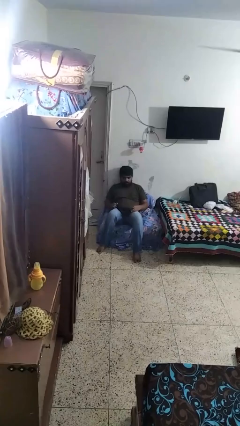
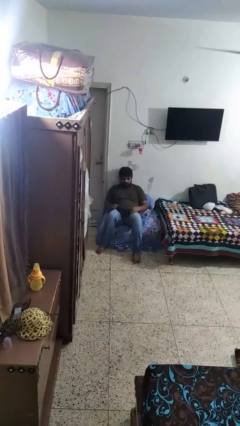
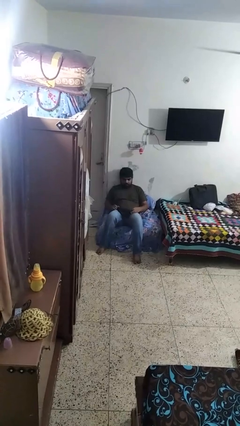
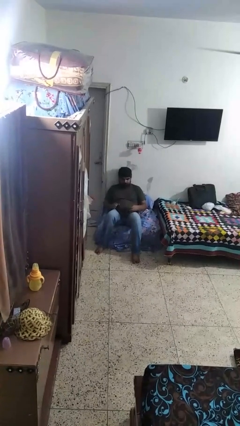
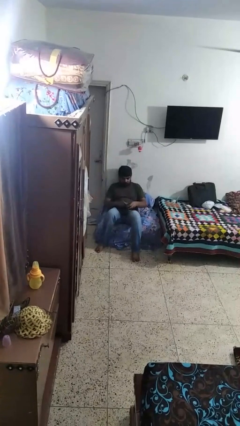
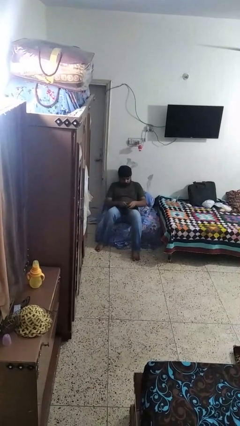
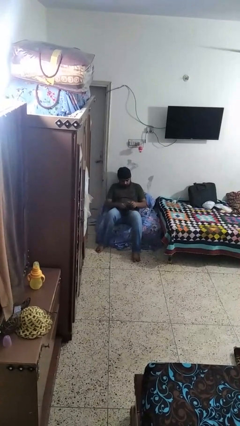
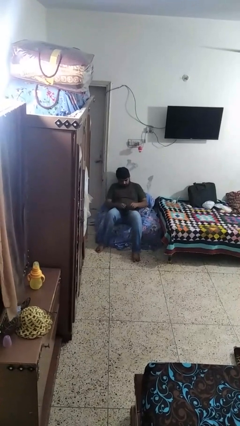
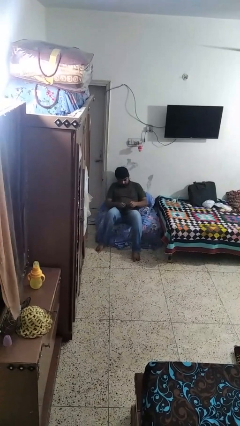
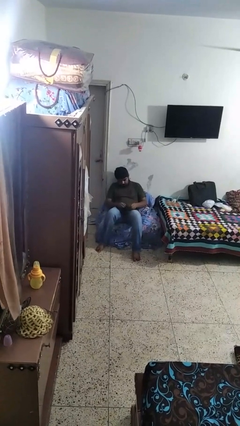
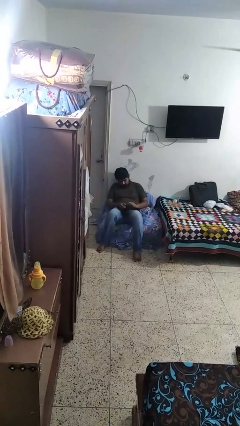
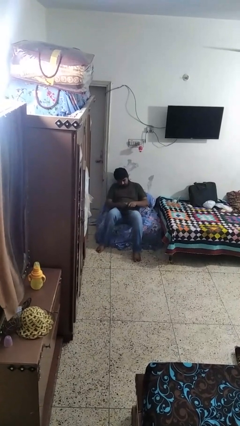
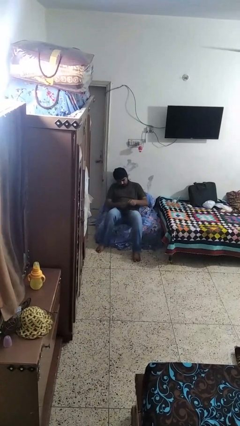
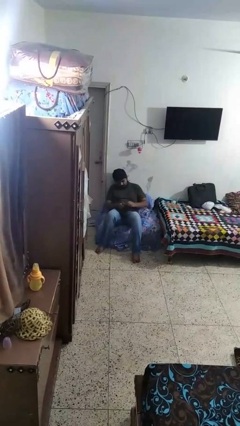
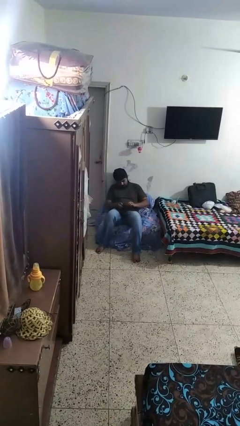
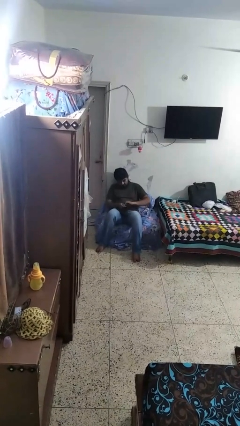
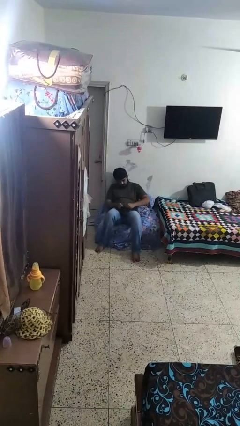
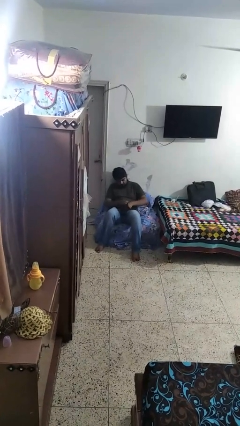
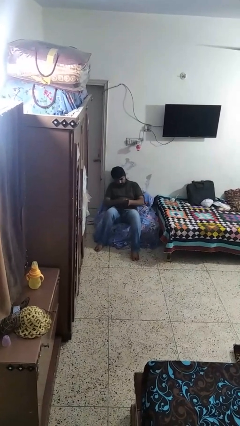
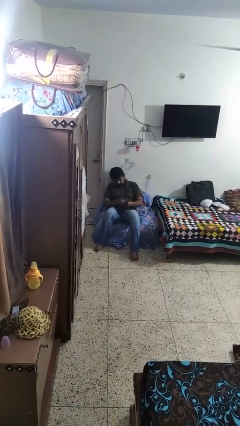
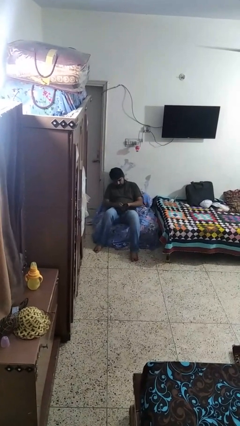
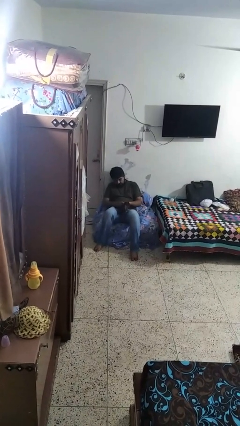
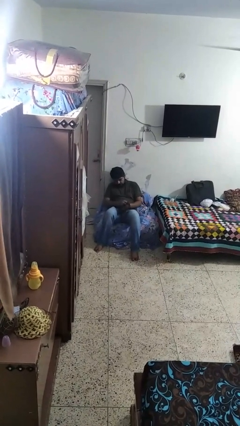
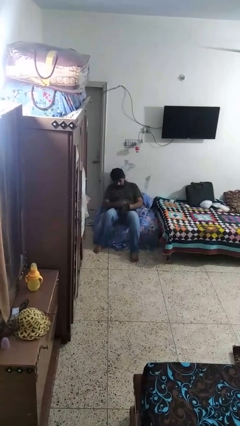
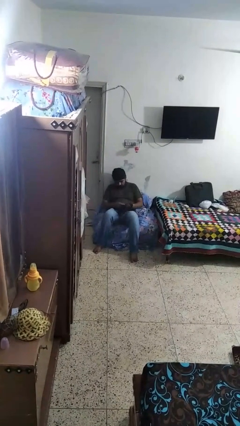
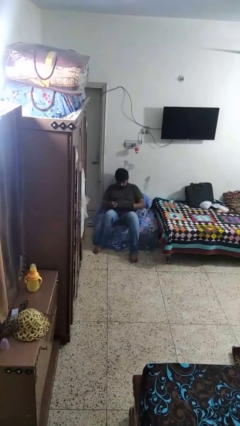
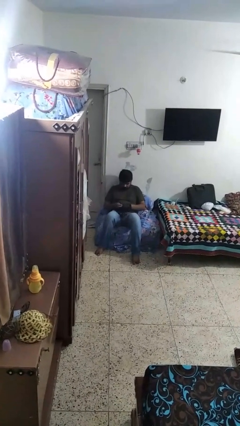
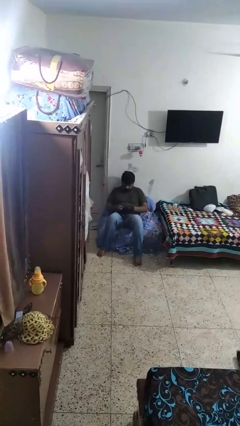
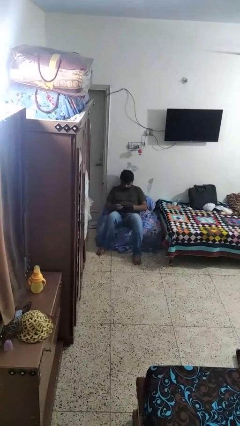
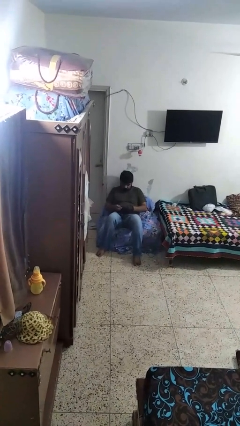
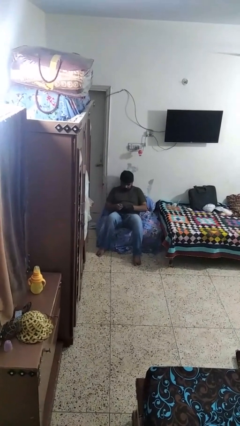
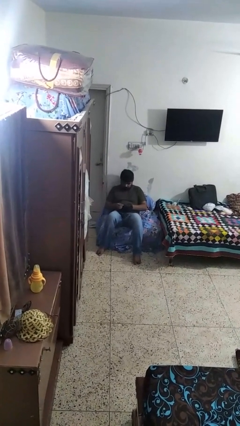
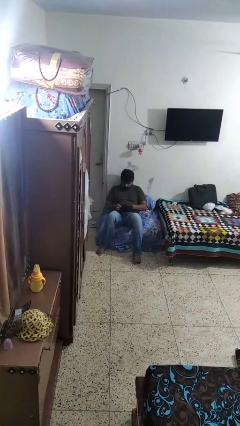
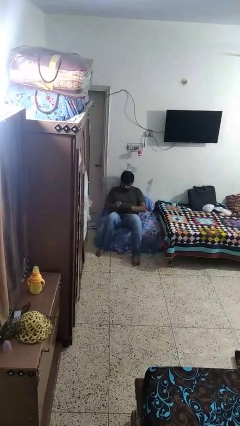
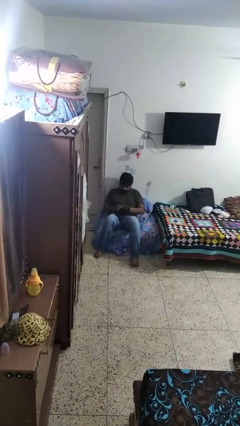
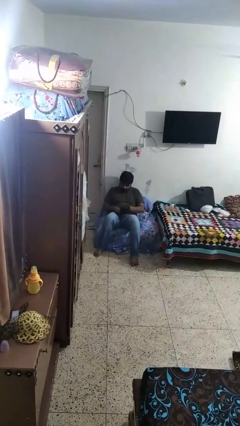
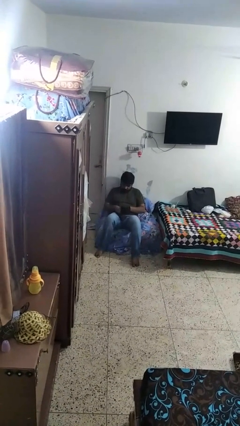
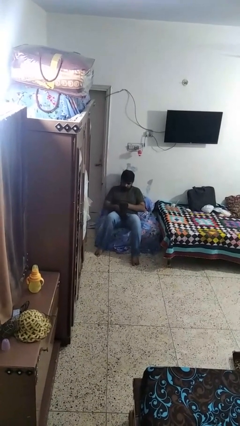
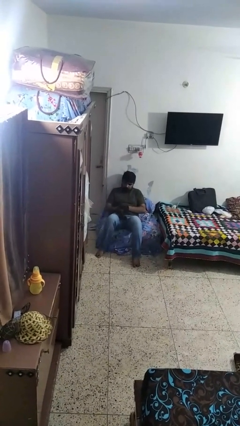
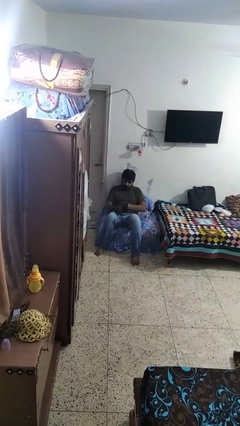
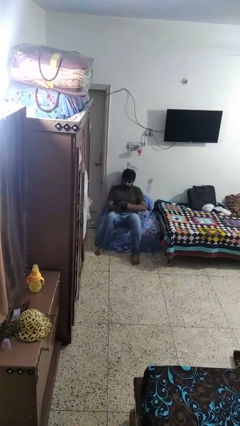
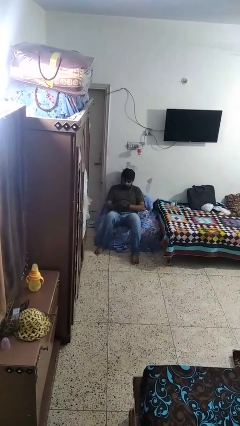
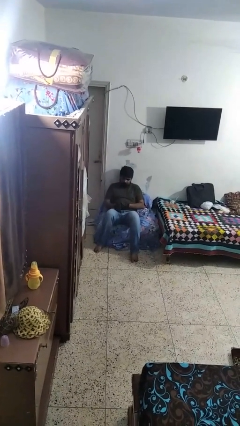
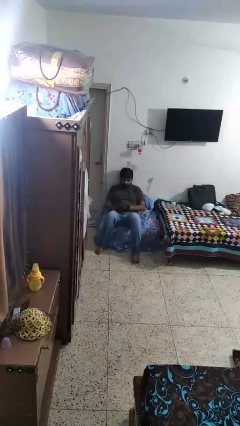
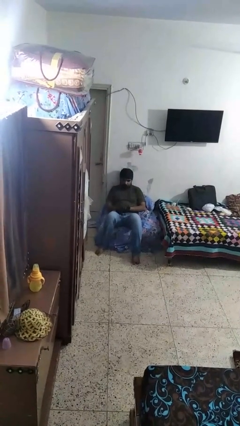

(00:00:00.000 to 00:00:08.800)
person puts on gloves

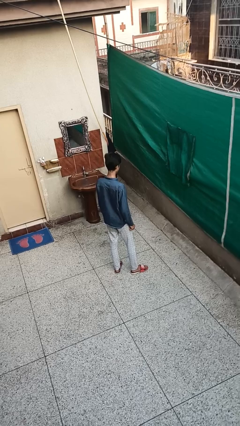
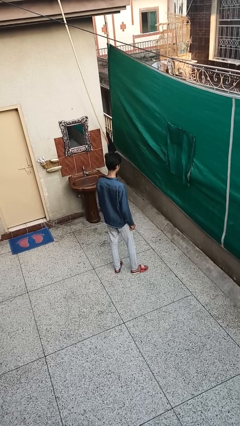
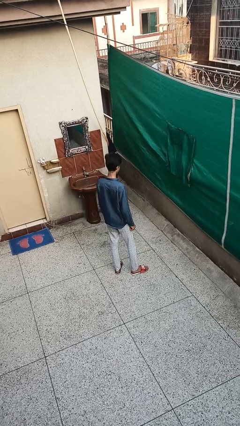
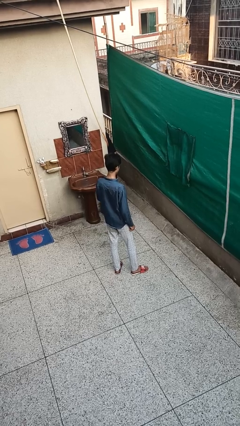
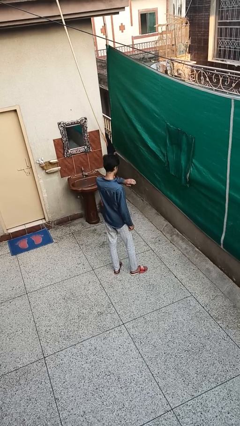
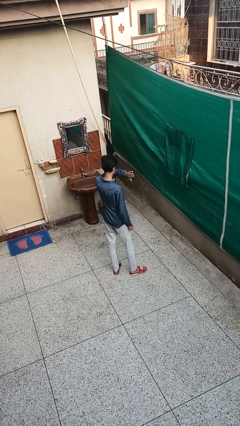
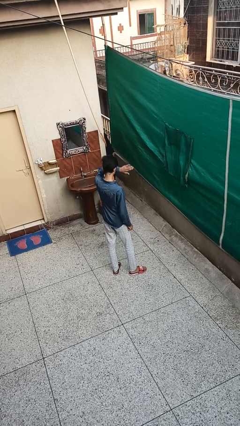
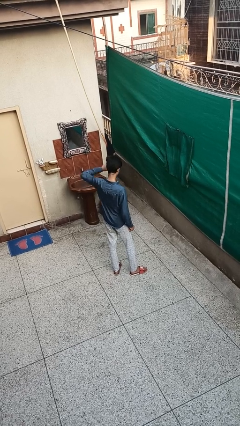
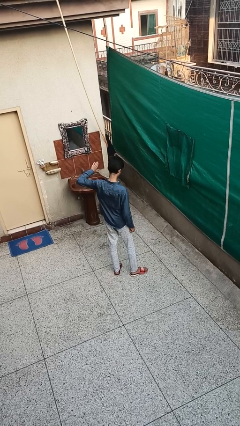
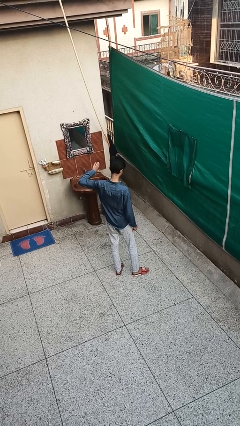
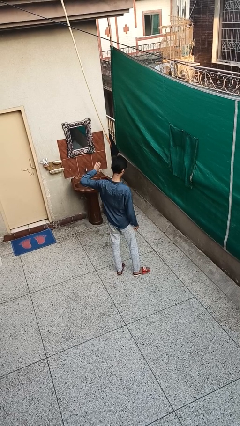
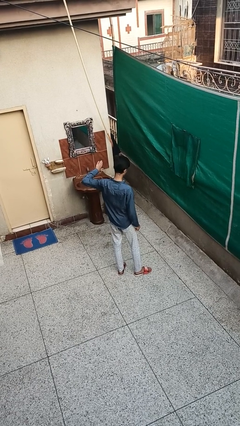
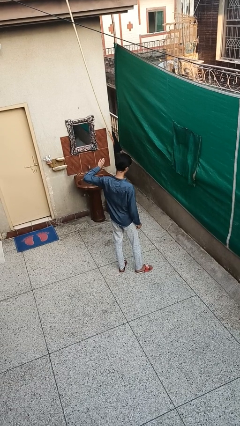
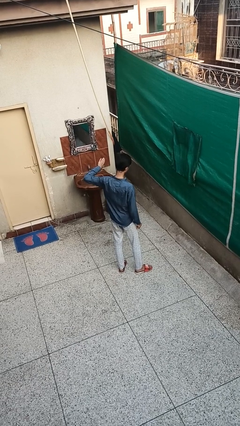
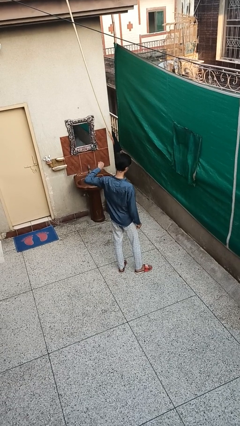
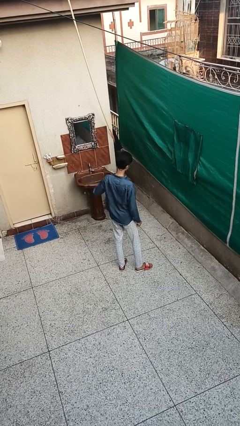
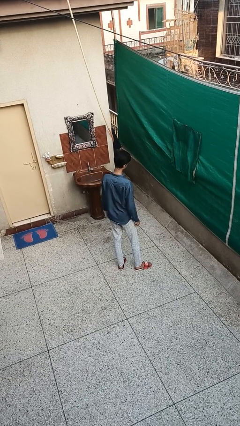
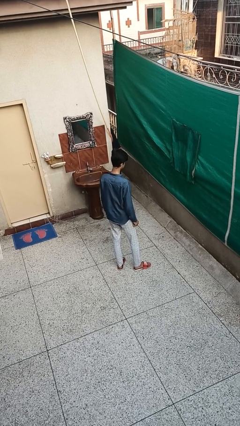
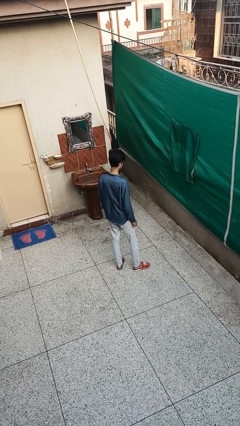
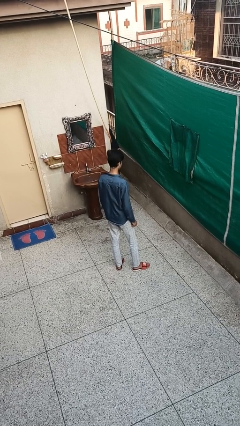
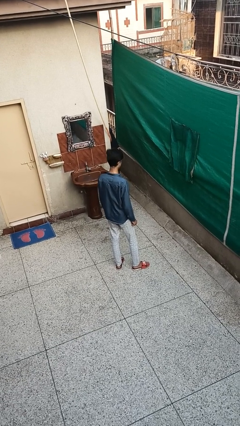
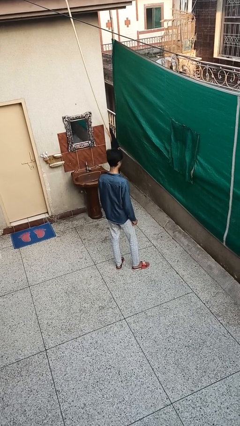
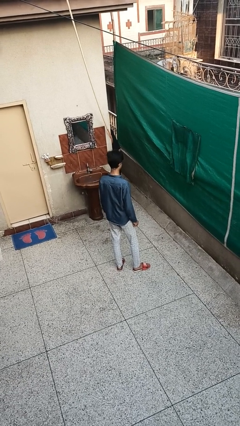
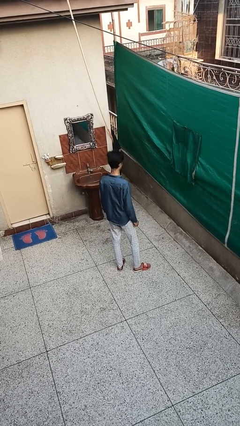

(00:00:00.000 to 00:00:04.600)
person gestures swipe left

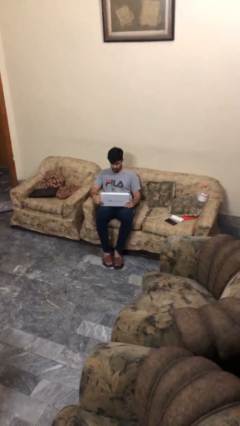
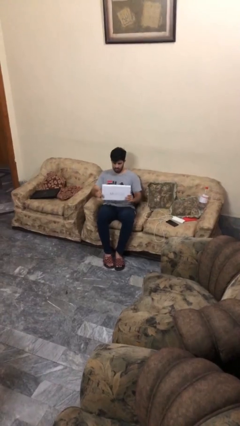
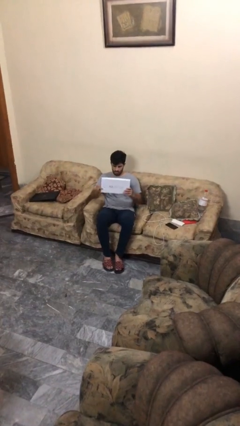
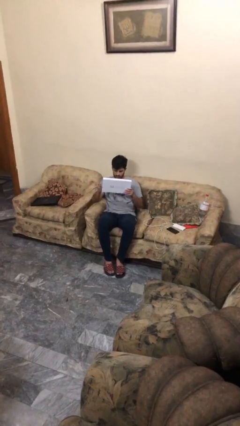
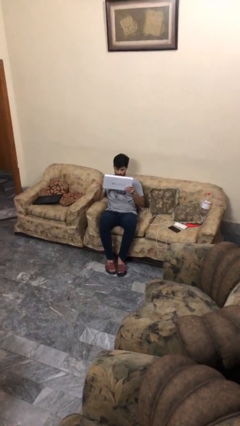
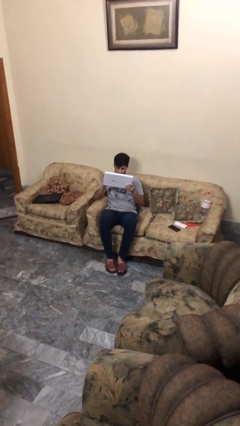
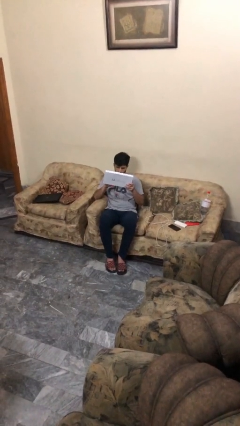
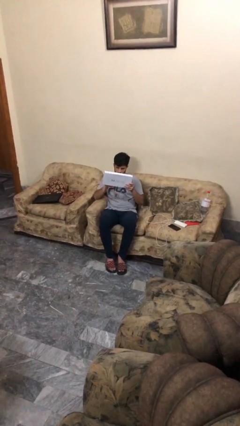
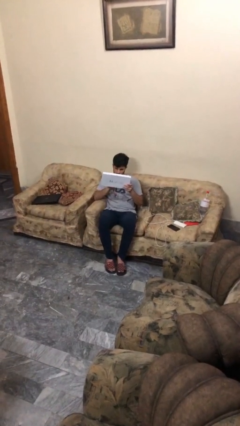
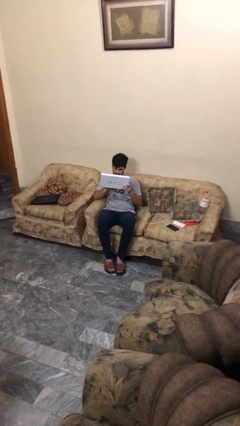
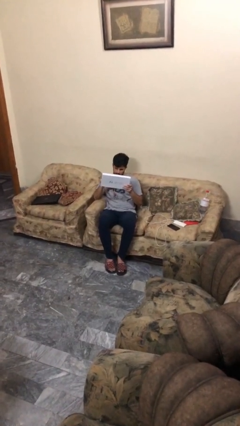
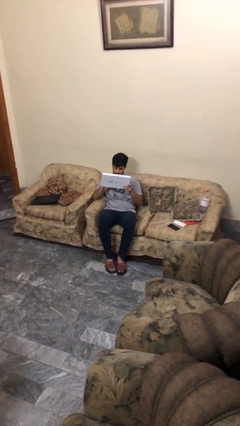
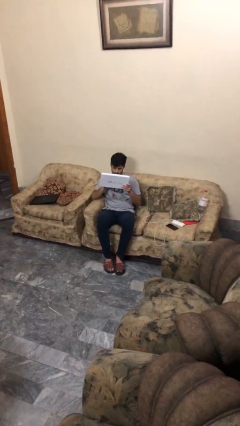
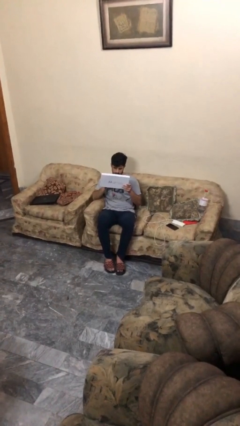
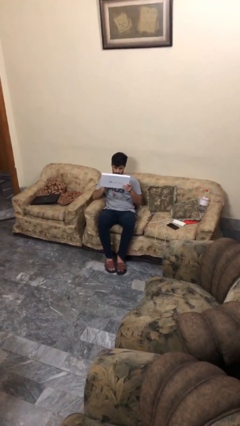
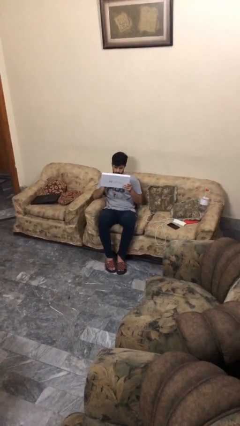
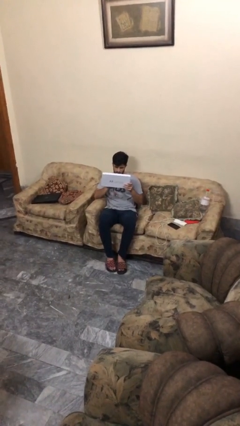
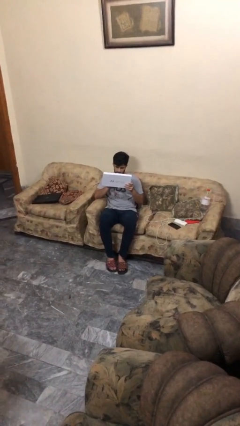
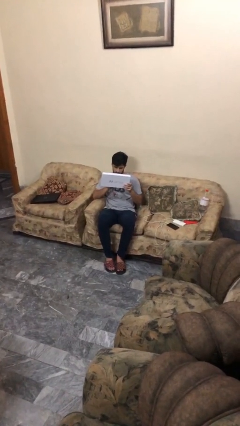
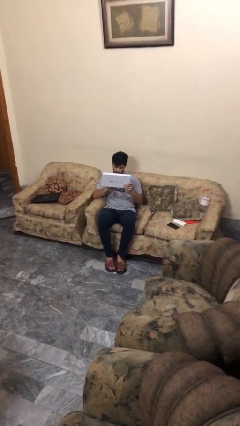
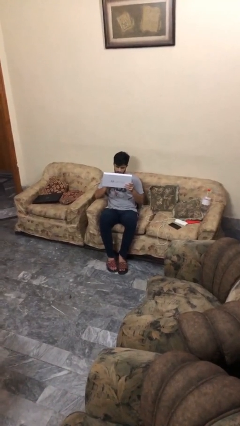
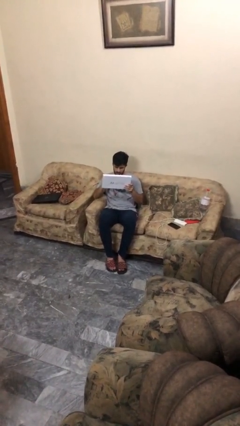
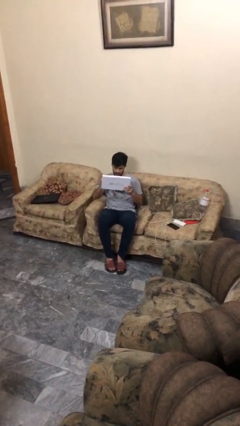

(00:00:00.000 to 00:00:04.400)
person interacts with tablet
